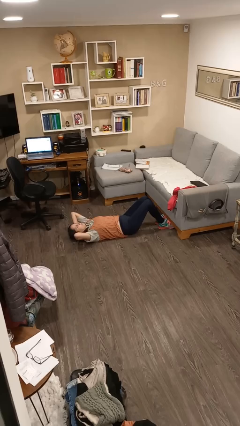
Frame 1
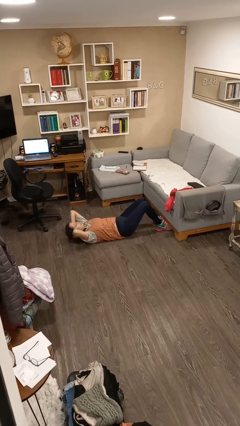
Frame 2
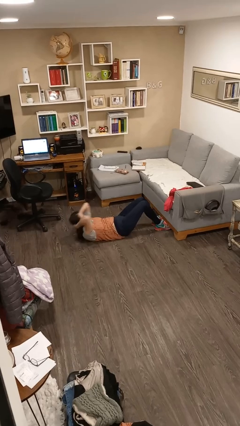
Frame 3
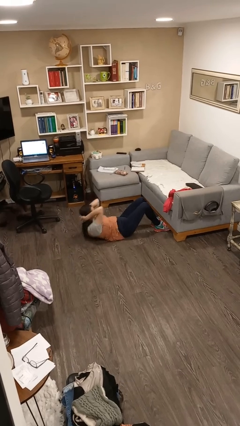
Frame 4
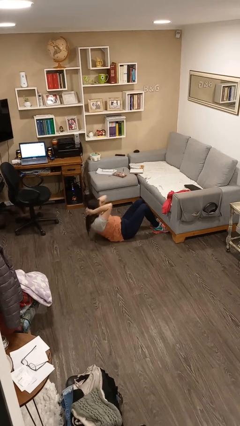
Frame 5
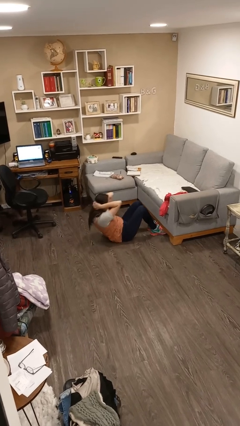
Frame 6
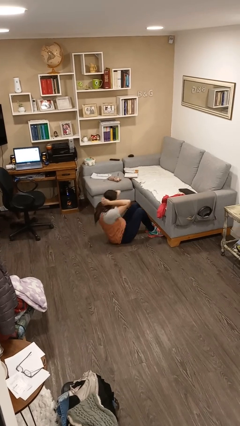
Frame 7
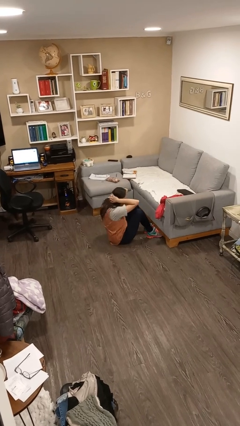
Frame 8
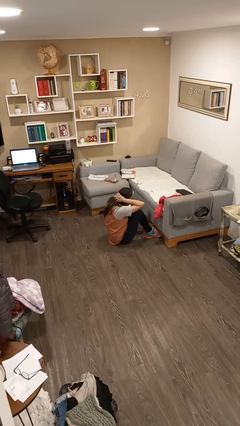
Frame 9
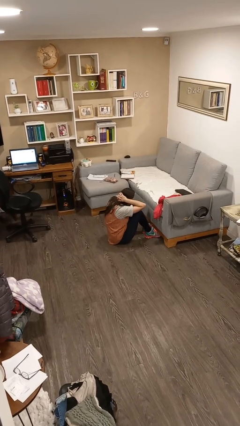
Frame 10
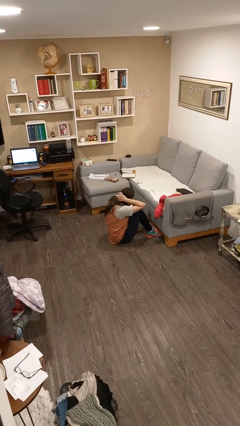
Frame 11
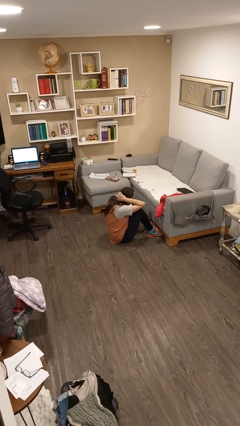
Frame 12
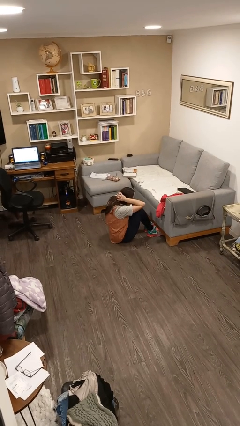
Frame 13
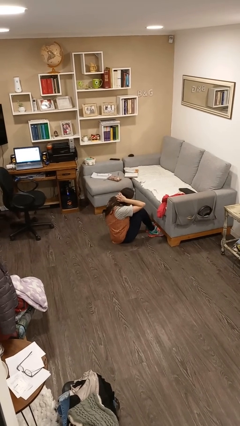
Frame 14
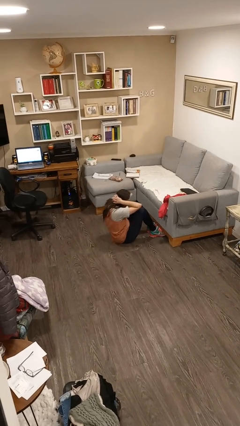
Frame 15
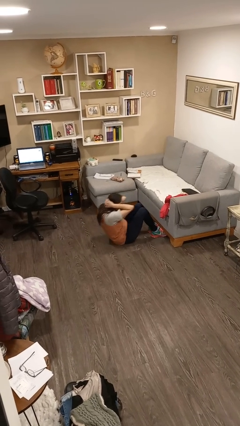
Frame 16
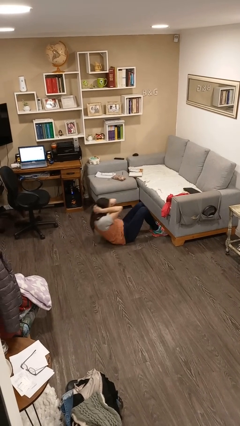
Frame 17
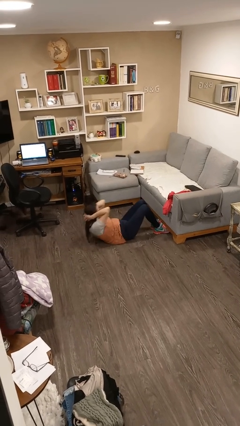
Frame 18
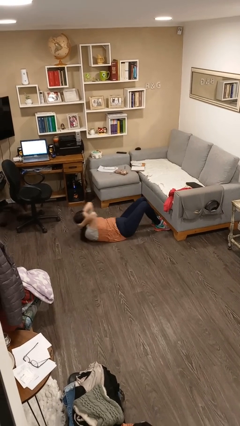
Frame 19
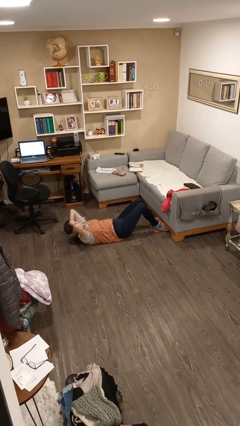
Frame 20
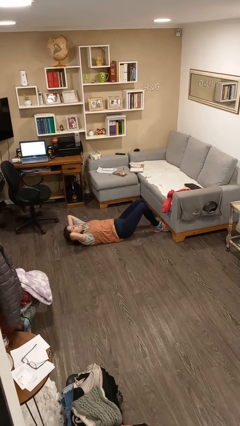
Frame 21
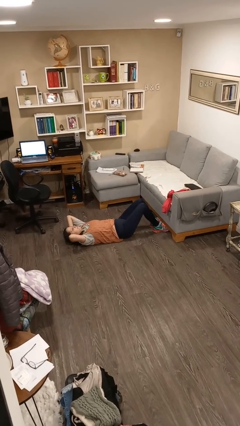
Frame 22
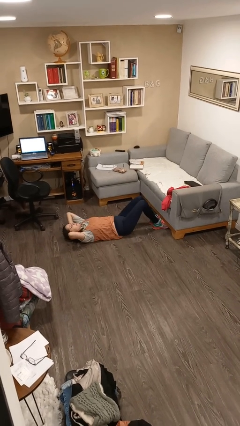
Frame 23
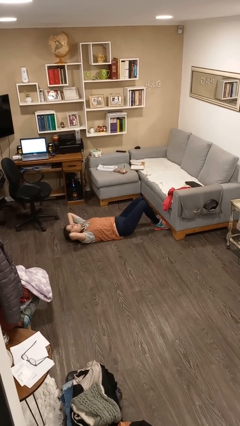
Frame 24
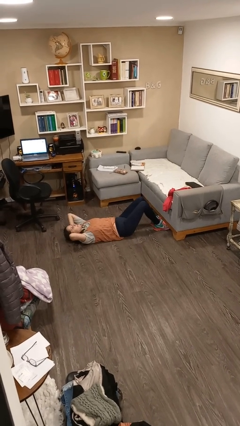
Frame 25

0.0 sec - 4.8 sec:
person exercises with situp

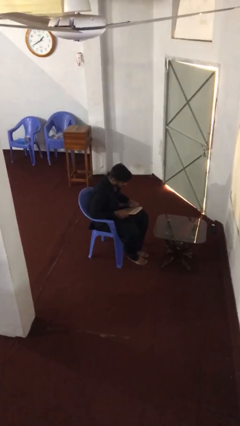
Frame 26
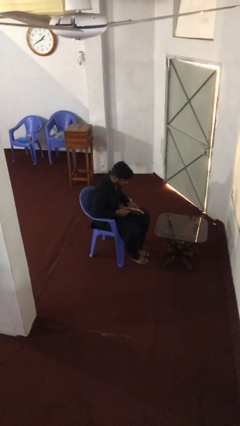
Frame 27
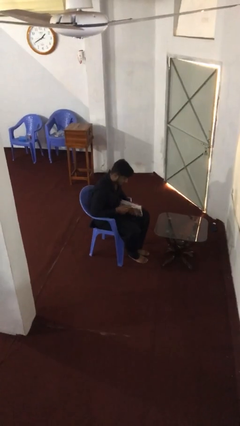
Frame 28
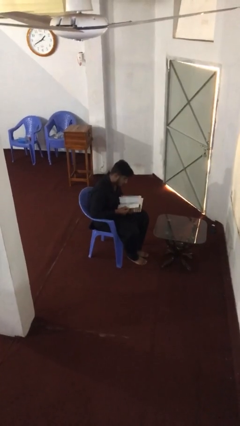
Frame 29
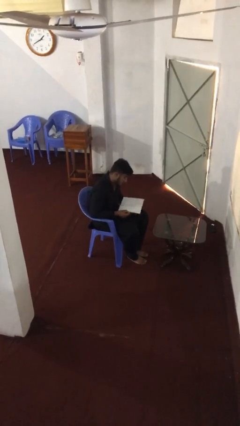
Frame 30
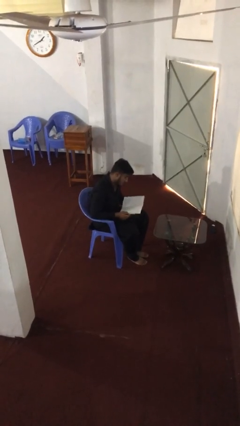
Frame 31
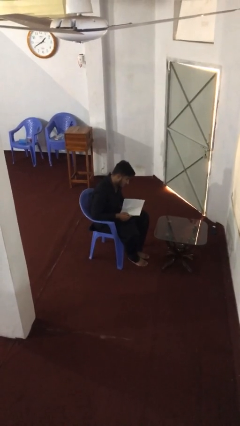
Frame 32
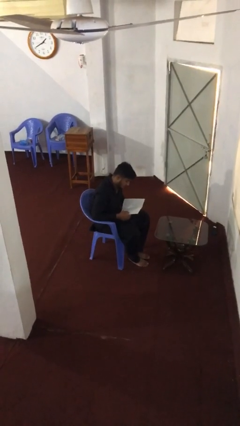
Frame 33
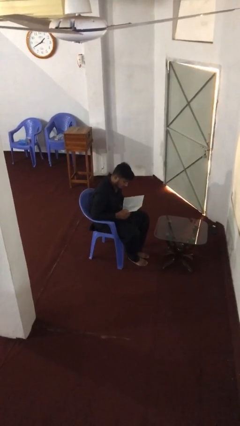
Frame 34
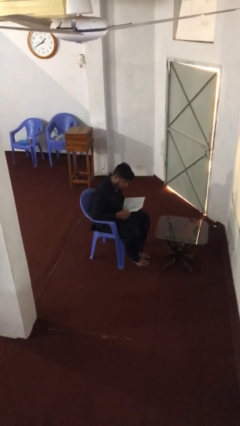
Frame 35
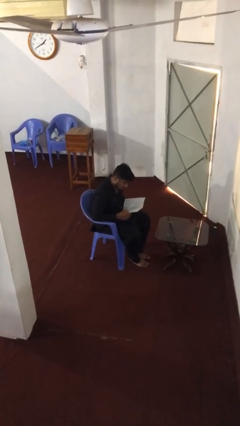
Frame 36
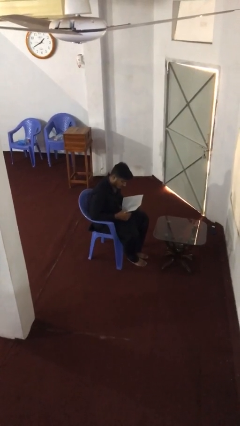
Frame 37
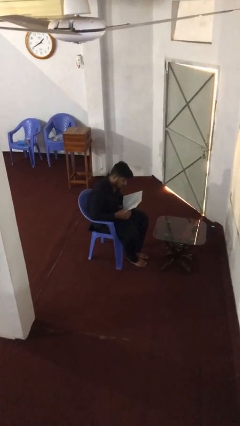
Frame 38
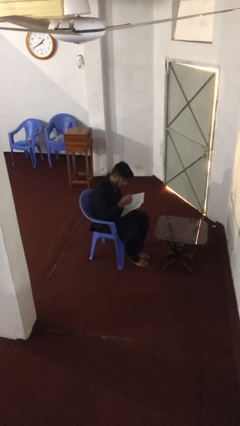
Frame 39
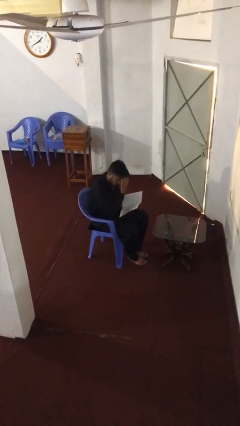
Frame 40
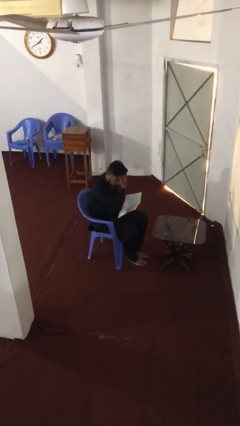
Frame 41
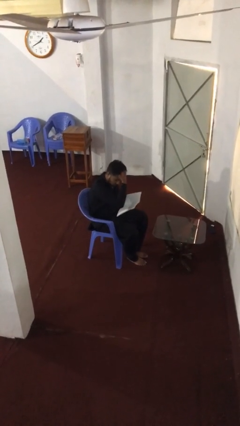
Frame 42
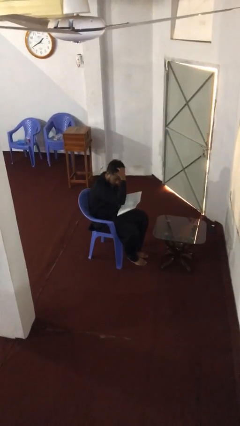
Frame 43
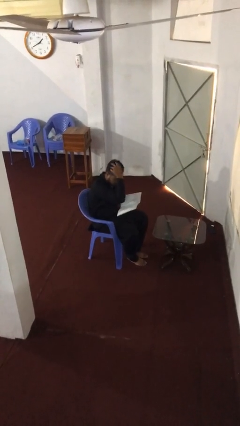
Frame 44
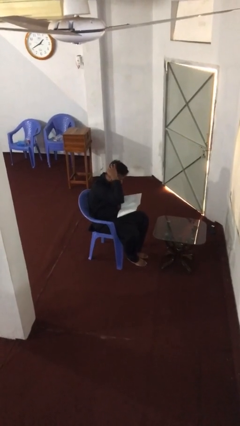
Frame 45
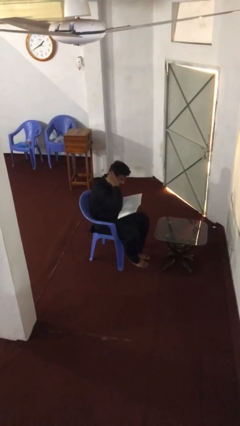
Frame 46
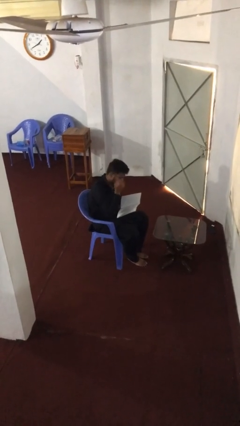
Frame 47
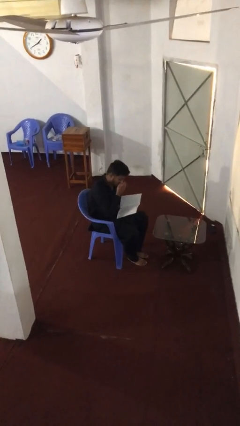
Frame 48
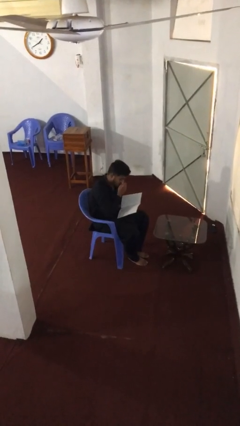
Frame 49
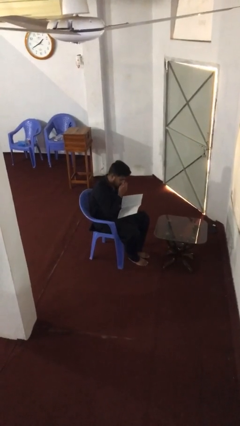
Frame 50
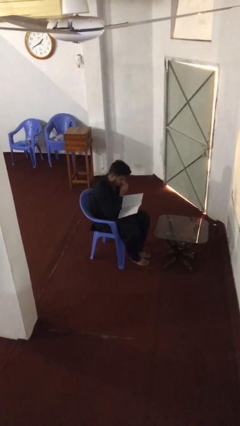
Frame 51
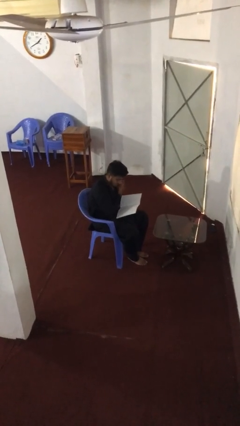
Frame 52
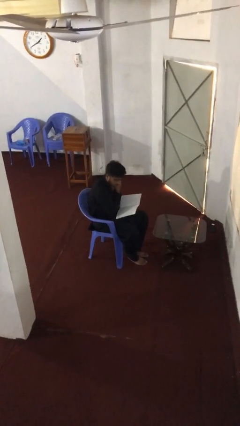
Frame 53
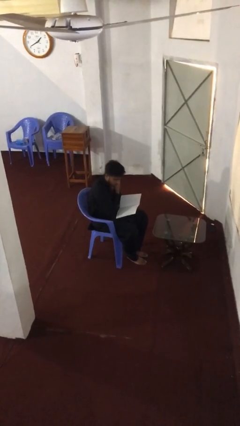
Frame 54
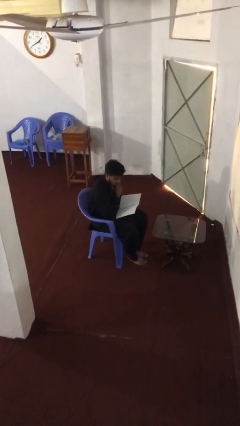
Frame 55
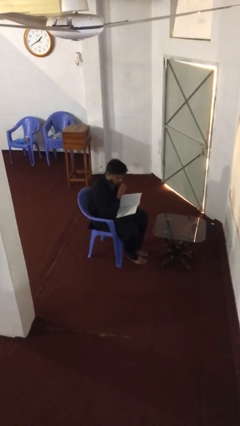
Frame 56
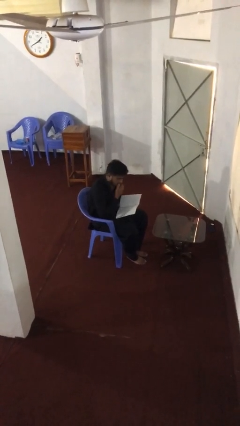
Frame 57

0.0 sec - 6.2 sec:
person reads document

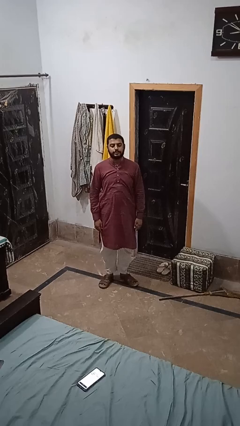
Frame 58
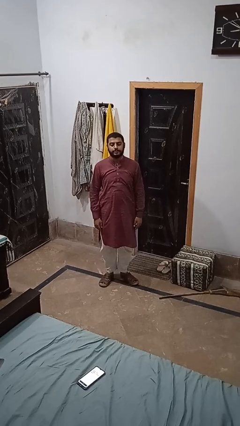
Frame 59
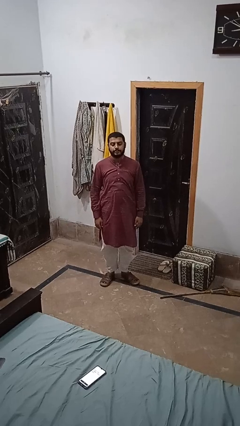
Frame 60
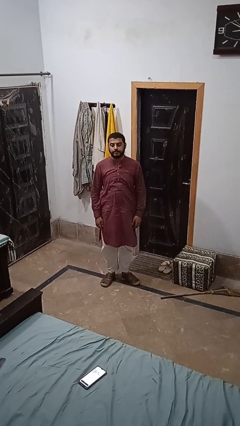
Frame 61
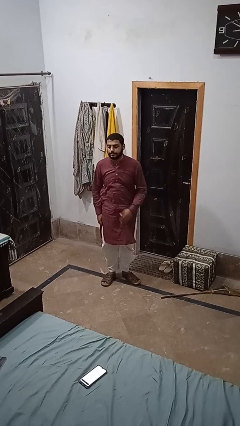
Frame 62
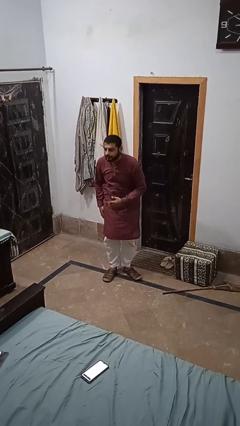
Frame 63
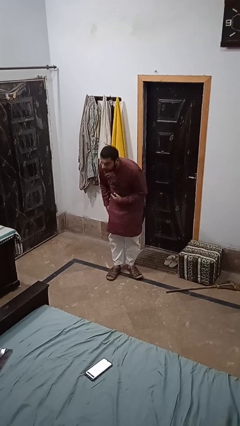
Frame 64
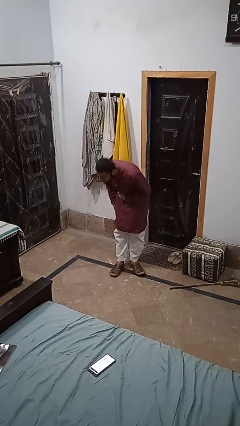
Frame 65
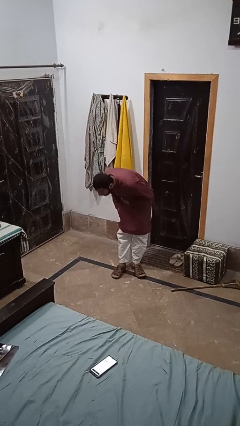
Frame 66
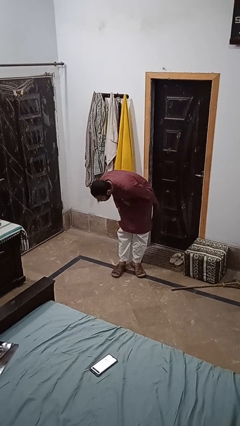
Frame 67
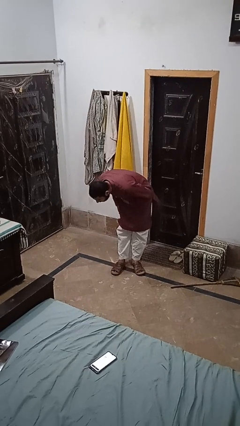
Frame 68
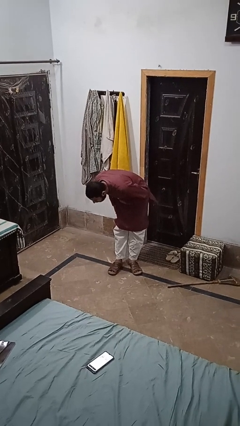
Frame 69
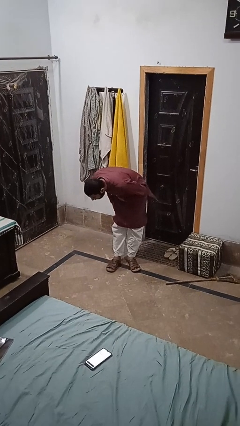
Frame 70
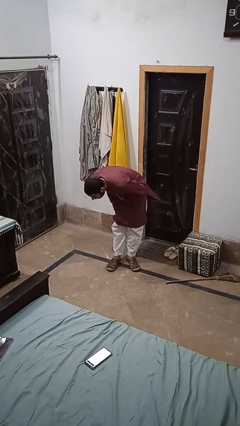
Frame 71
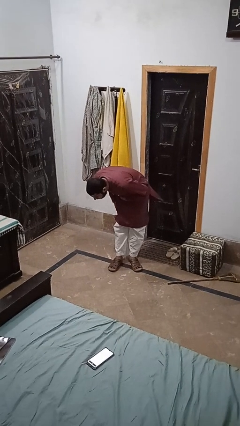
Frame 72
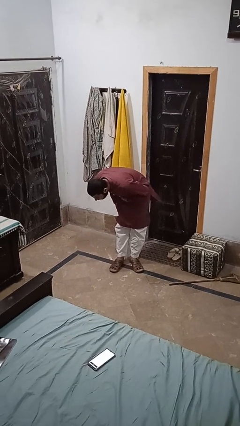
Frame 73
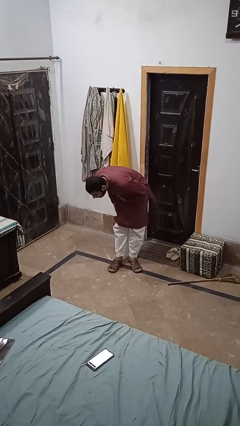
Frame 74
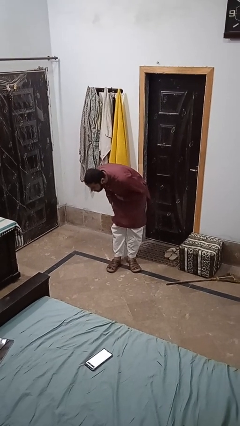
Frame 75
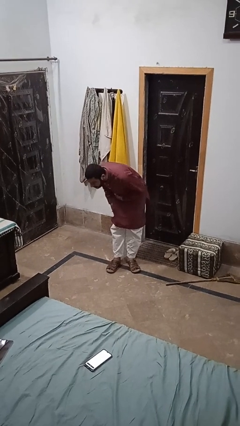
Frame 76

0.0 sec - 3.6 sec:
person bows

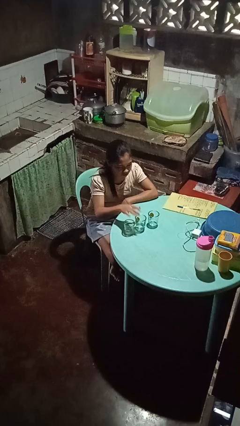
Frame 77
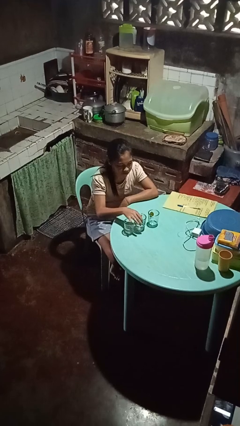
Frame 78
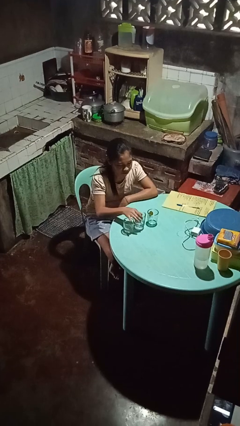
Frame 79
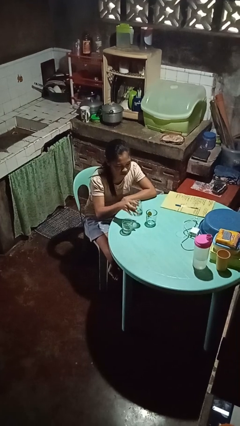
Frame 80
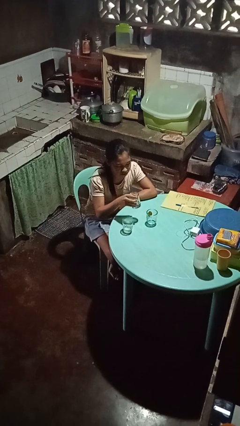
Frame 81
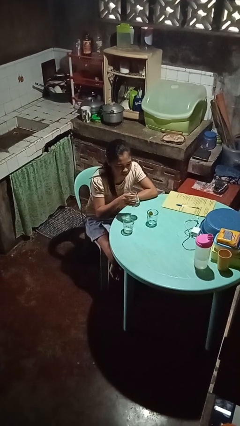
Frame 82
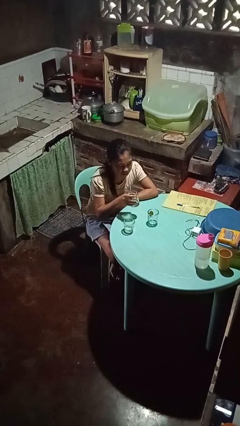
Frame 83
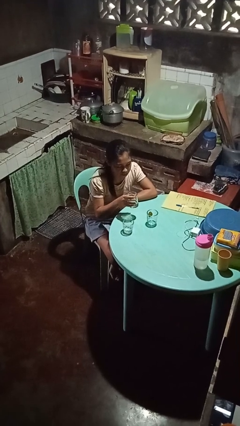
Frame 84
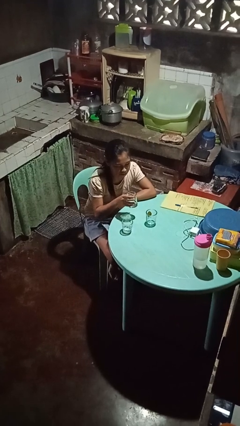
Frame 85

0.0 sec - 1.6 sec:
person picks up object from table

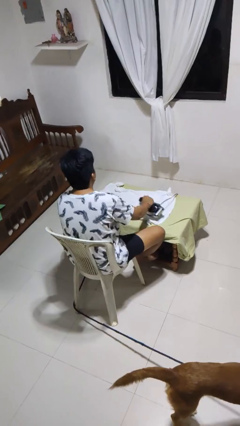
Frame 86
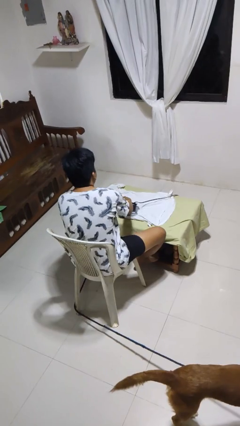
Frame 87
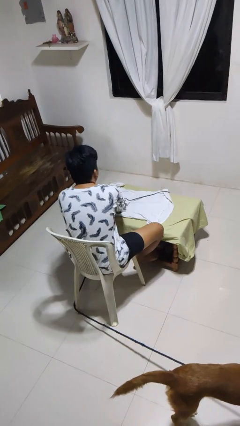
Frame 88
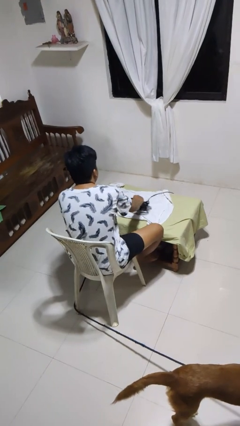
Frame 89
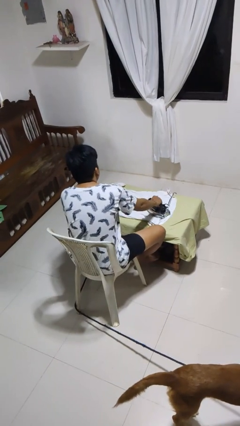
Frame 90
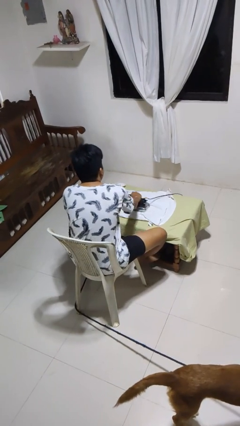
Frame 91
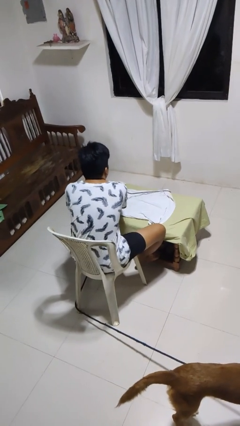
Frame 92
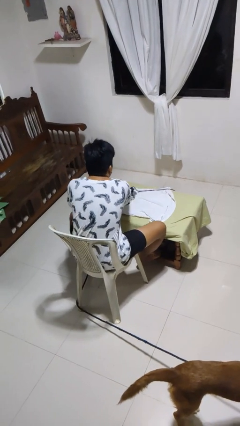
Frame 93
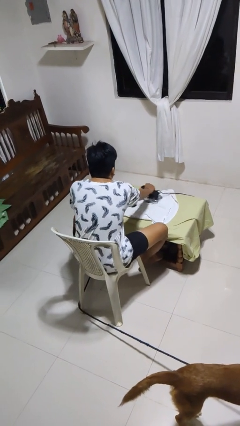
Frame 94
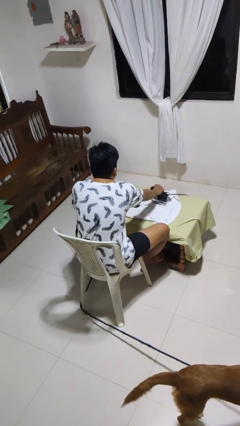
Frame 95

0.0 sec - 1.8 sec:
person irons clothes
